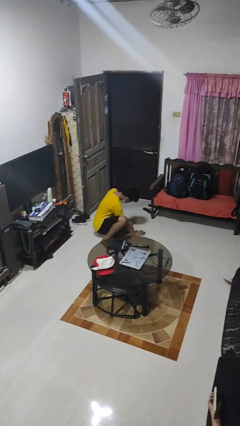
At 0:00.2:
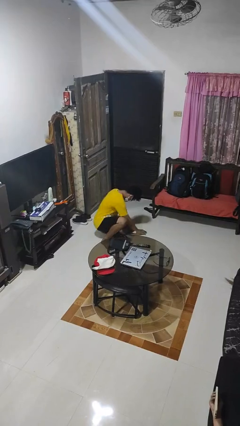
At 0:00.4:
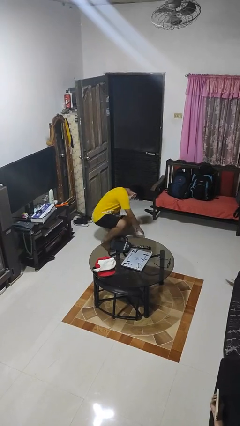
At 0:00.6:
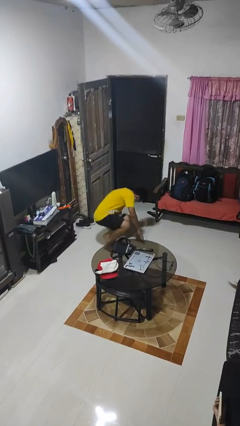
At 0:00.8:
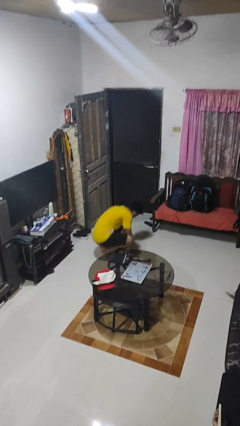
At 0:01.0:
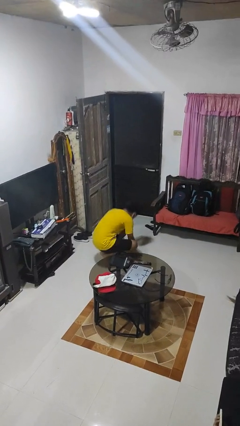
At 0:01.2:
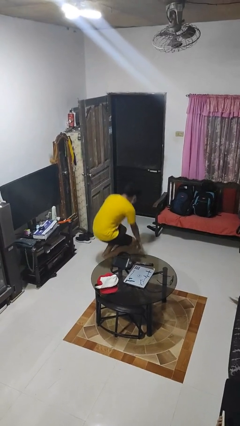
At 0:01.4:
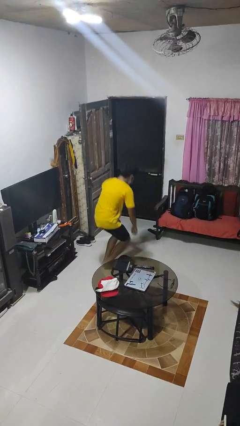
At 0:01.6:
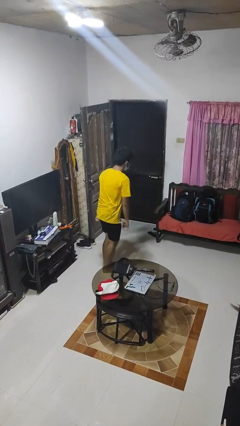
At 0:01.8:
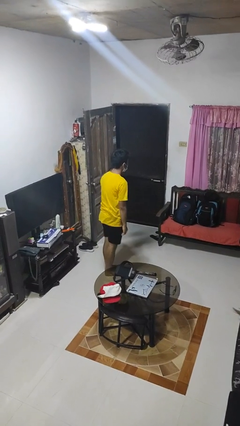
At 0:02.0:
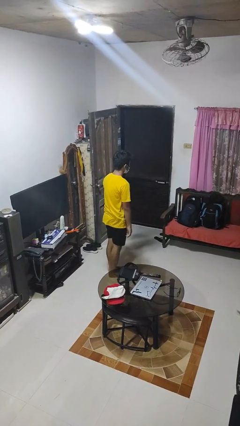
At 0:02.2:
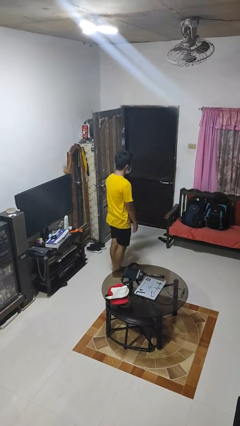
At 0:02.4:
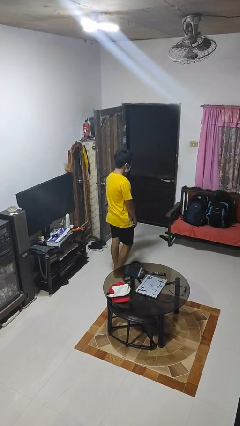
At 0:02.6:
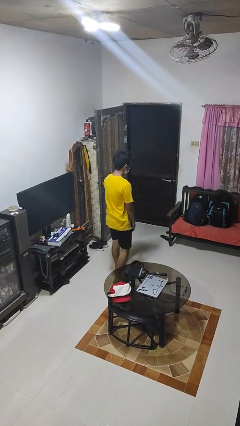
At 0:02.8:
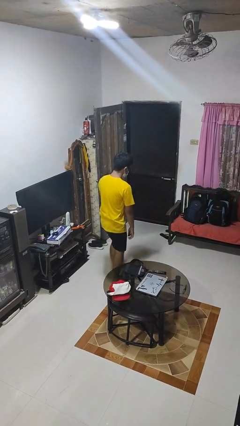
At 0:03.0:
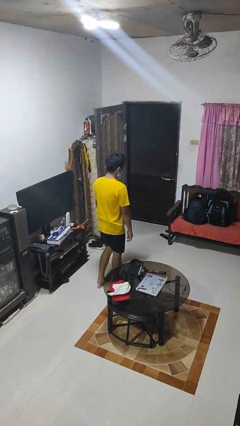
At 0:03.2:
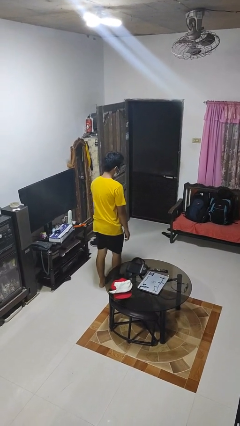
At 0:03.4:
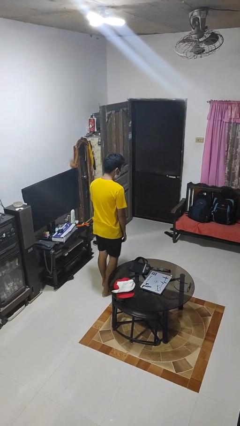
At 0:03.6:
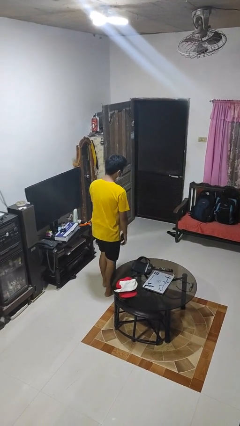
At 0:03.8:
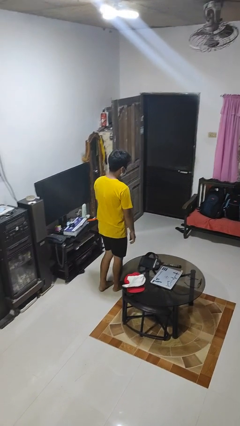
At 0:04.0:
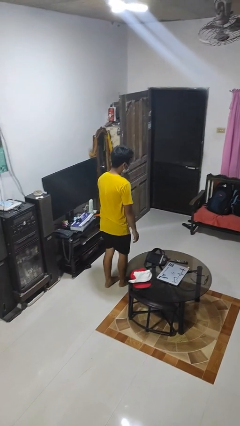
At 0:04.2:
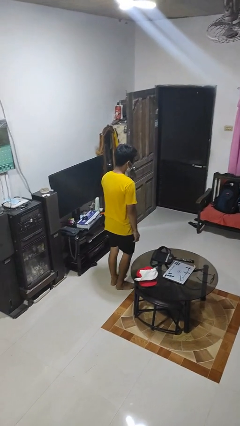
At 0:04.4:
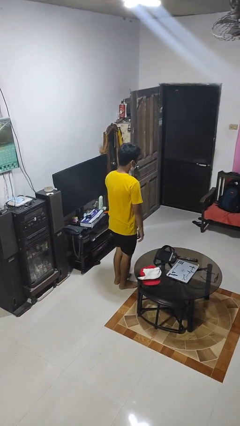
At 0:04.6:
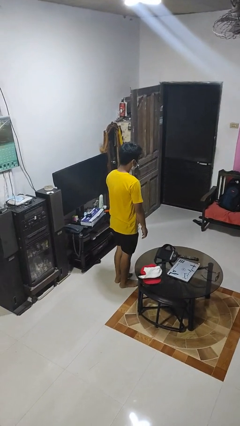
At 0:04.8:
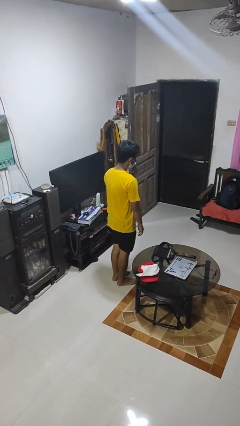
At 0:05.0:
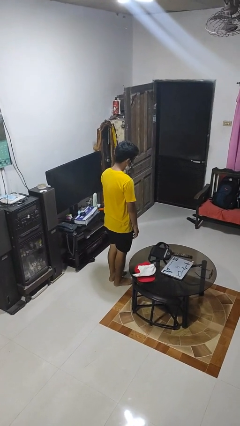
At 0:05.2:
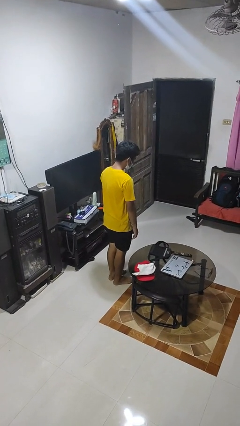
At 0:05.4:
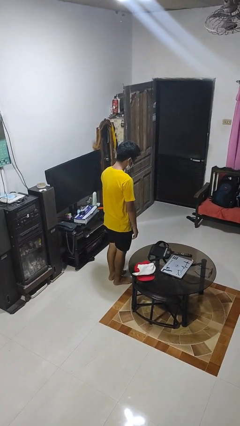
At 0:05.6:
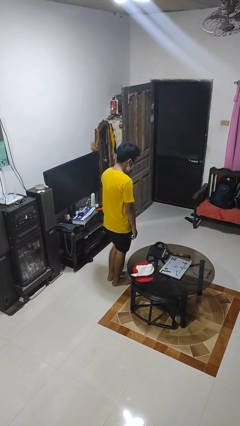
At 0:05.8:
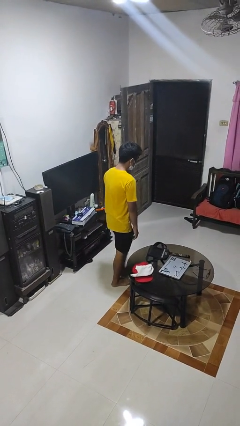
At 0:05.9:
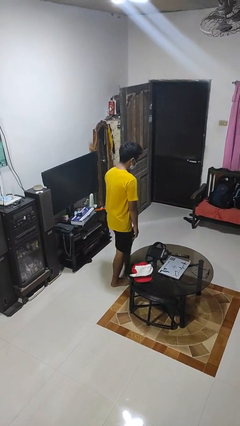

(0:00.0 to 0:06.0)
person stands up from floor

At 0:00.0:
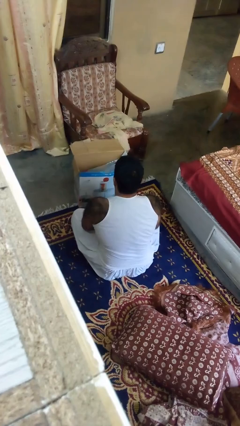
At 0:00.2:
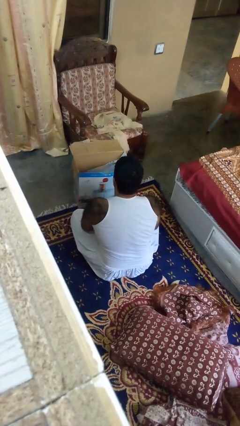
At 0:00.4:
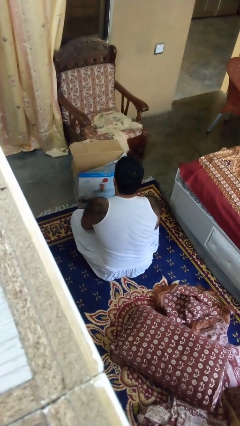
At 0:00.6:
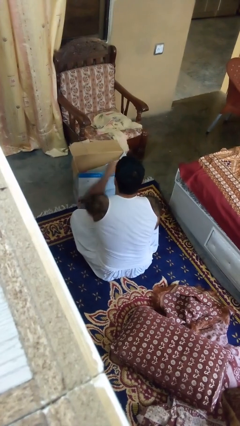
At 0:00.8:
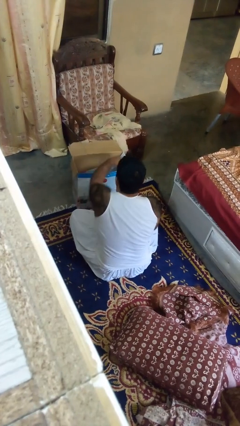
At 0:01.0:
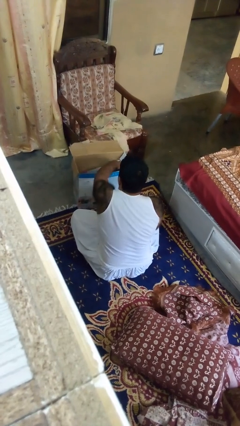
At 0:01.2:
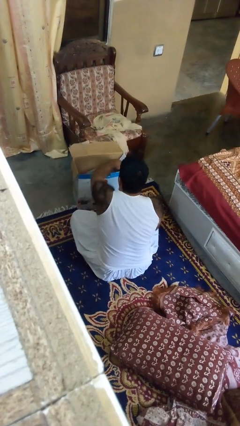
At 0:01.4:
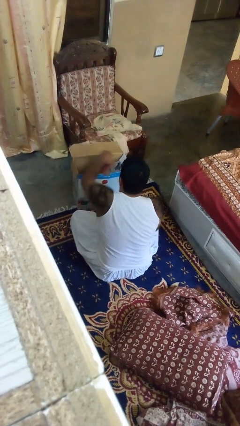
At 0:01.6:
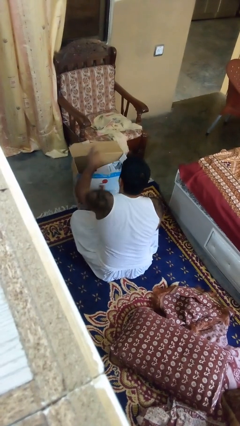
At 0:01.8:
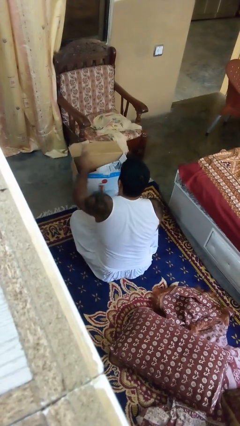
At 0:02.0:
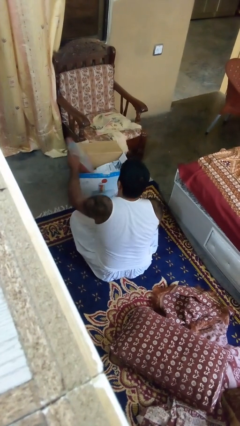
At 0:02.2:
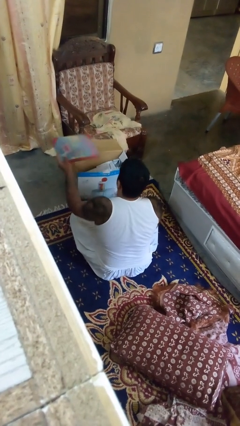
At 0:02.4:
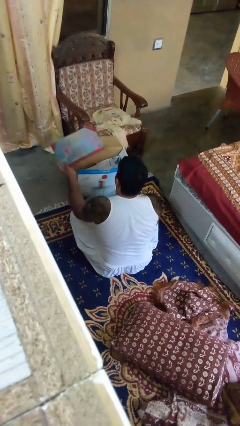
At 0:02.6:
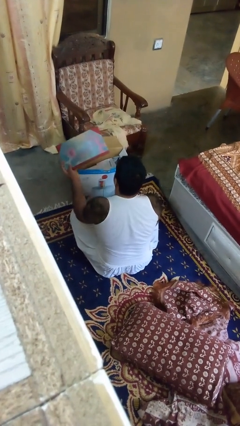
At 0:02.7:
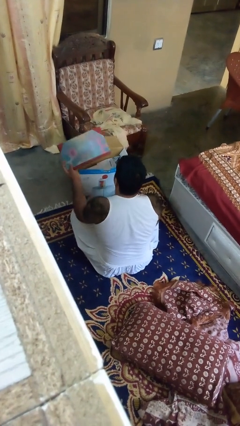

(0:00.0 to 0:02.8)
person takes object from box

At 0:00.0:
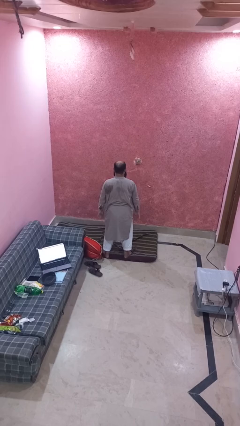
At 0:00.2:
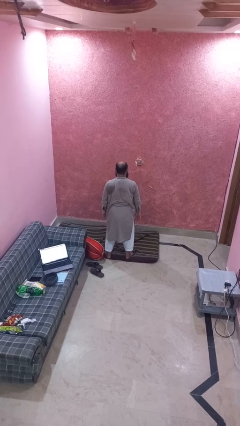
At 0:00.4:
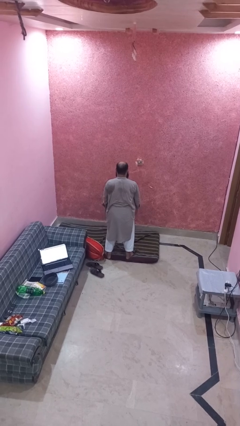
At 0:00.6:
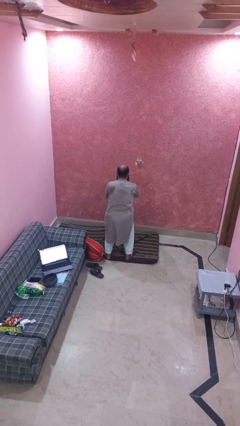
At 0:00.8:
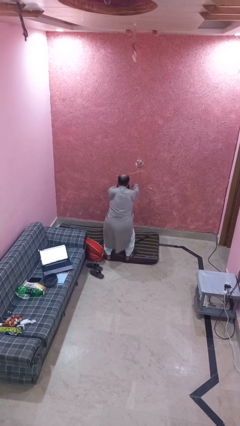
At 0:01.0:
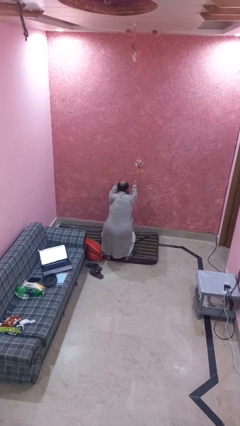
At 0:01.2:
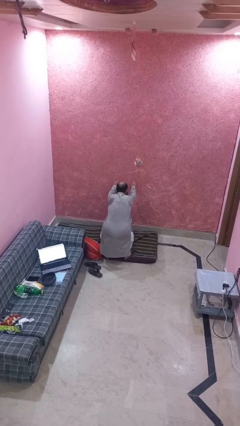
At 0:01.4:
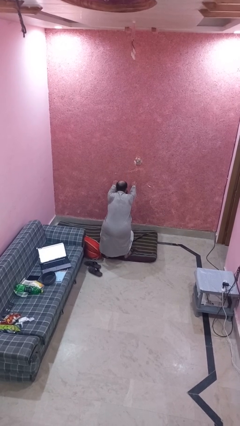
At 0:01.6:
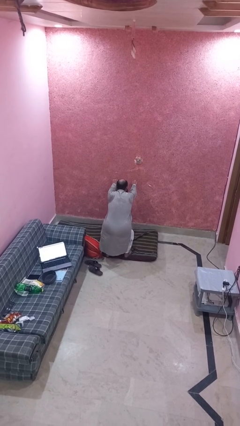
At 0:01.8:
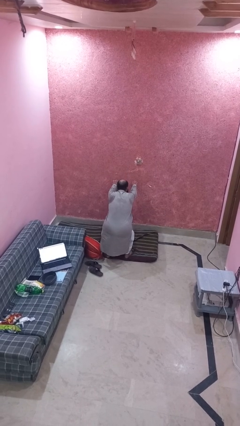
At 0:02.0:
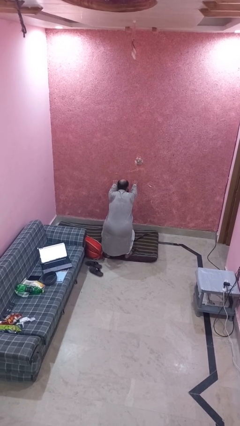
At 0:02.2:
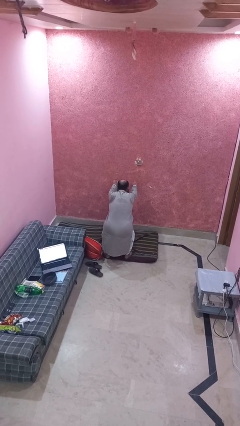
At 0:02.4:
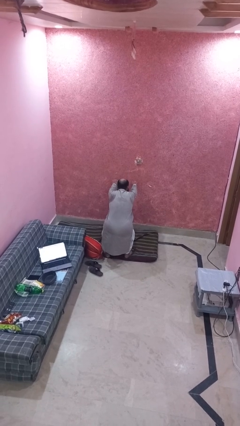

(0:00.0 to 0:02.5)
person squats

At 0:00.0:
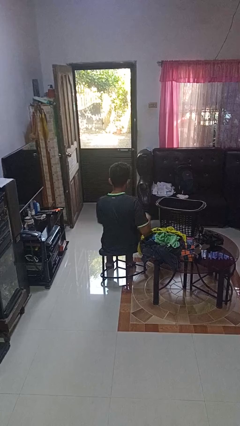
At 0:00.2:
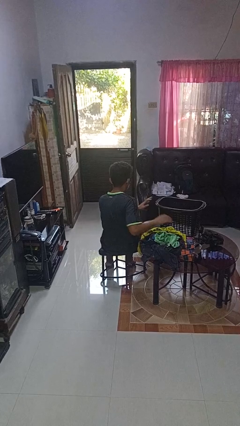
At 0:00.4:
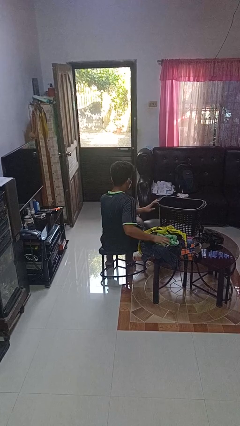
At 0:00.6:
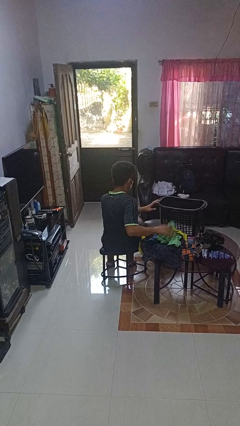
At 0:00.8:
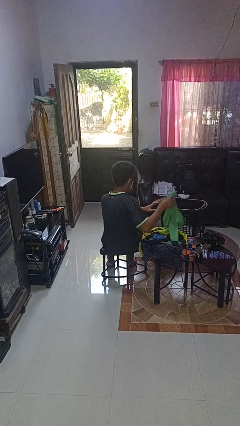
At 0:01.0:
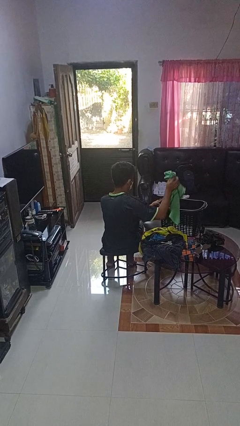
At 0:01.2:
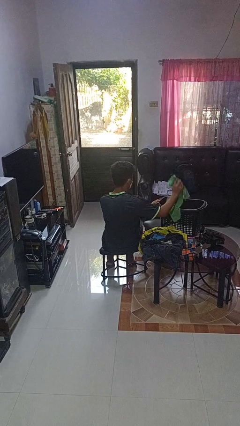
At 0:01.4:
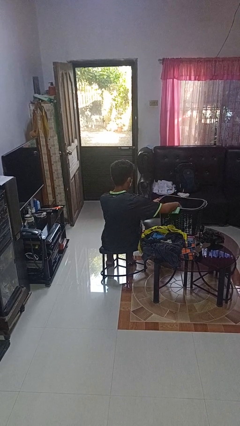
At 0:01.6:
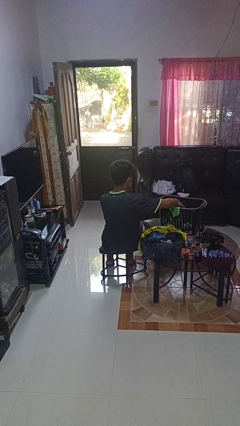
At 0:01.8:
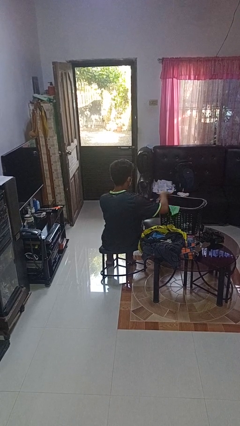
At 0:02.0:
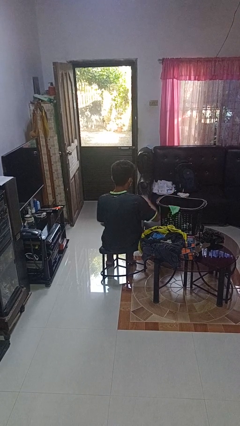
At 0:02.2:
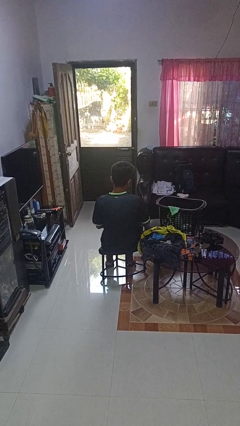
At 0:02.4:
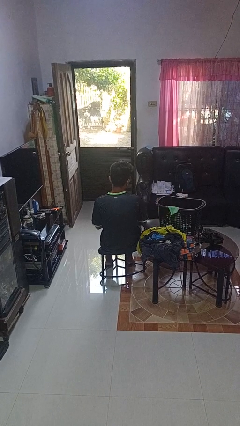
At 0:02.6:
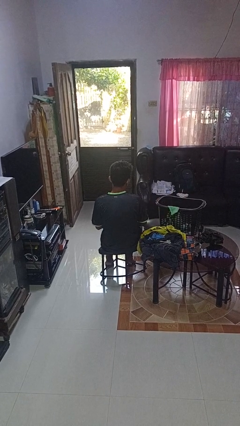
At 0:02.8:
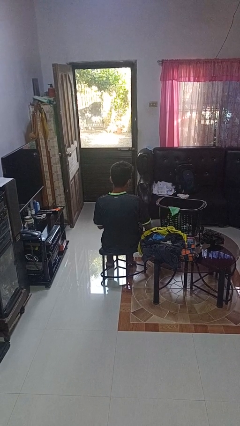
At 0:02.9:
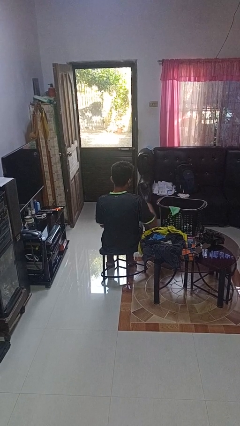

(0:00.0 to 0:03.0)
person puts object into basket

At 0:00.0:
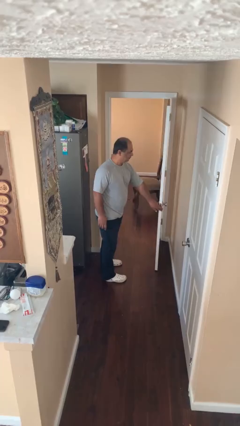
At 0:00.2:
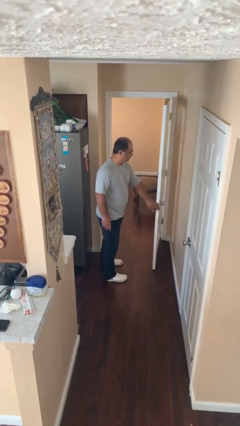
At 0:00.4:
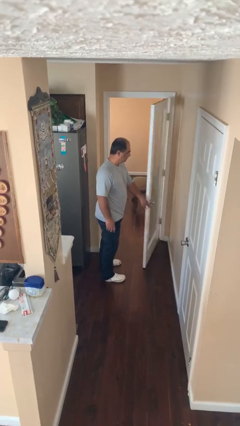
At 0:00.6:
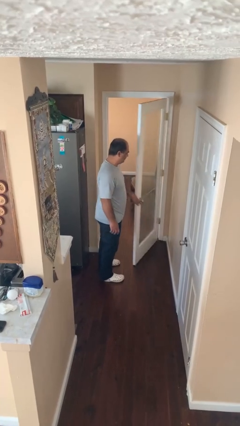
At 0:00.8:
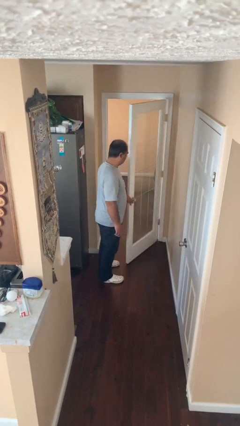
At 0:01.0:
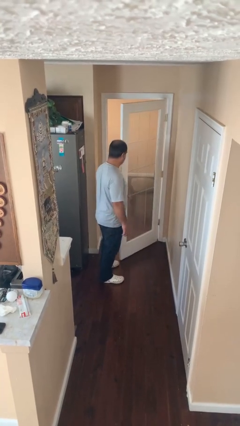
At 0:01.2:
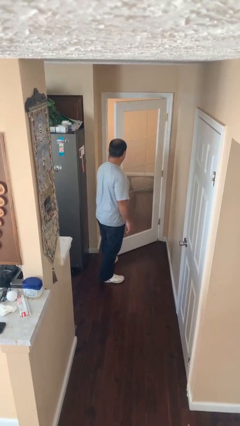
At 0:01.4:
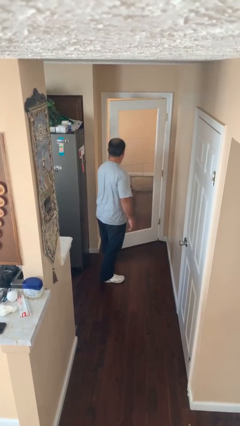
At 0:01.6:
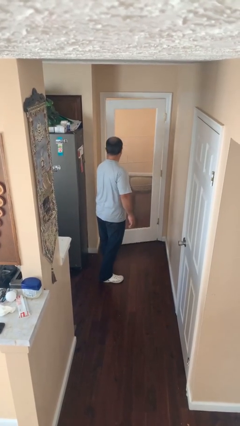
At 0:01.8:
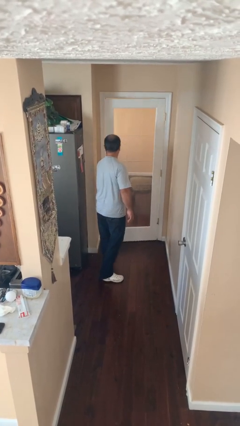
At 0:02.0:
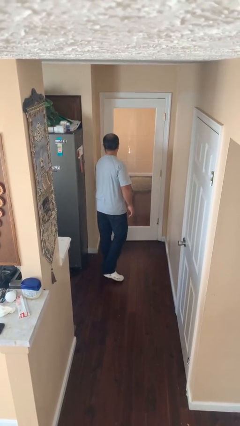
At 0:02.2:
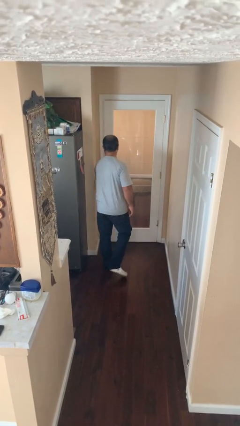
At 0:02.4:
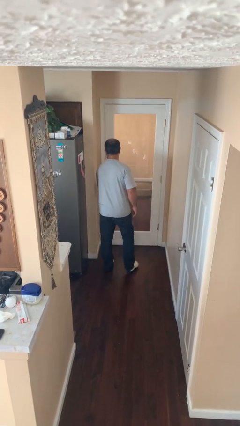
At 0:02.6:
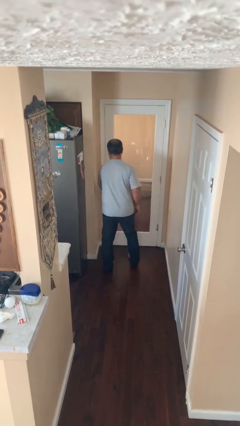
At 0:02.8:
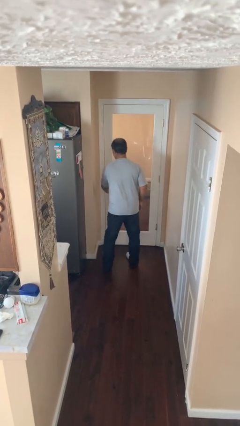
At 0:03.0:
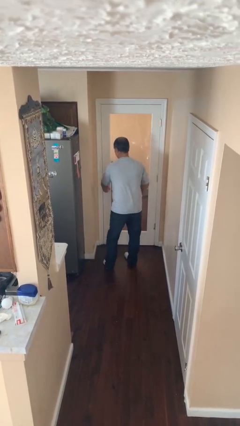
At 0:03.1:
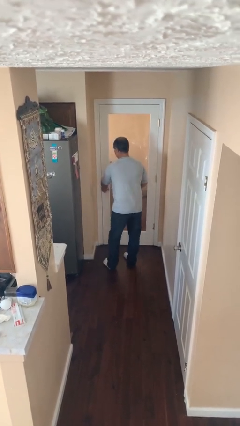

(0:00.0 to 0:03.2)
person closes facility door
